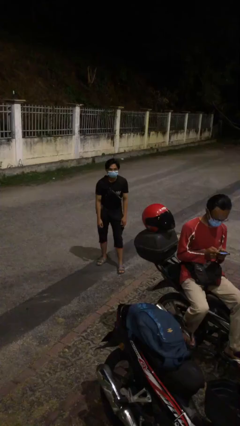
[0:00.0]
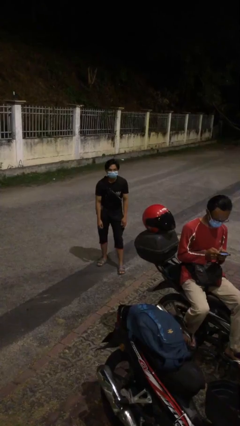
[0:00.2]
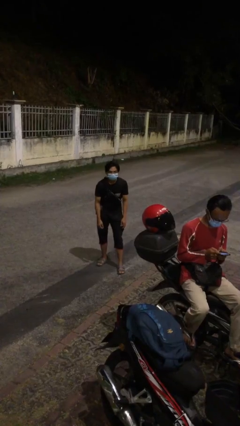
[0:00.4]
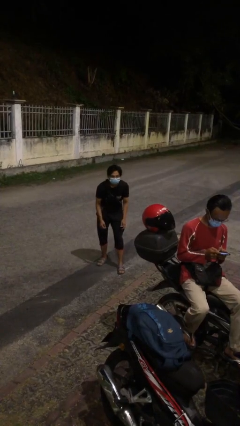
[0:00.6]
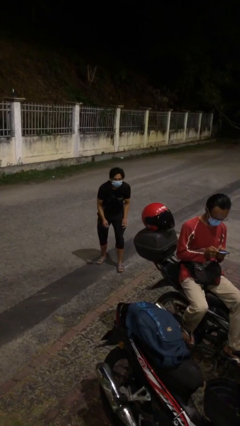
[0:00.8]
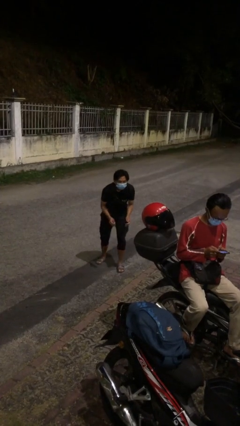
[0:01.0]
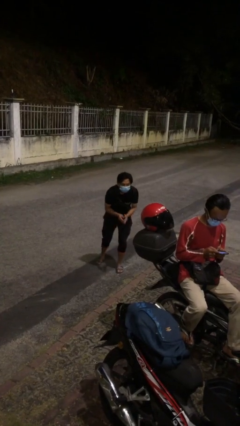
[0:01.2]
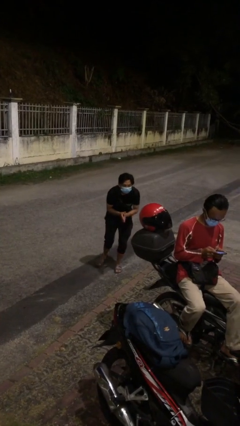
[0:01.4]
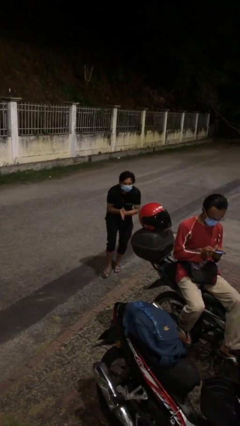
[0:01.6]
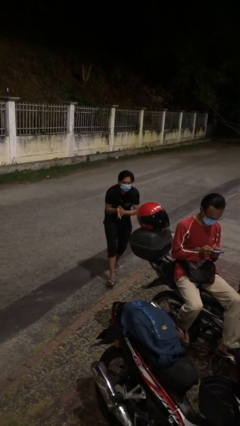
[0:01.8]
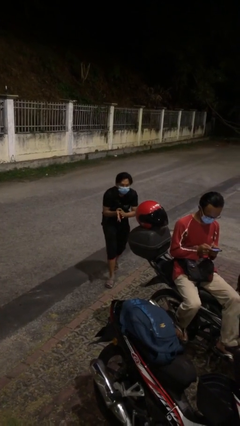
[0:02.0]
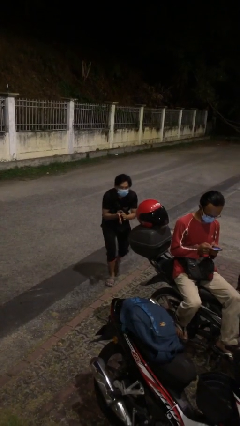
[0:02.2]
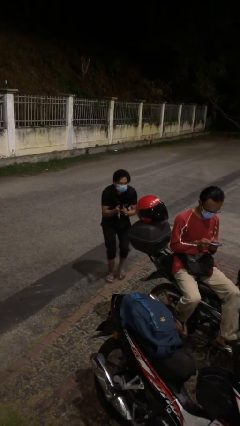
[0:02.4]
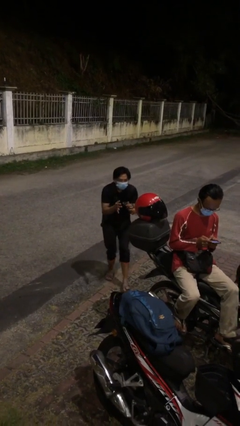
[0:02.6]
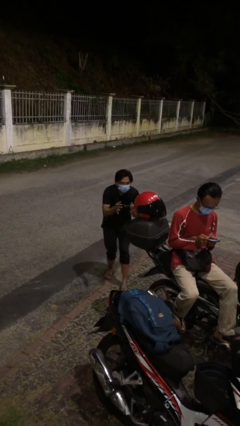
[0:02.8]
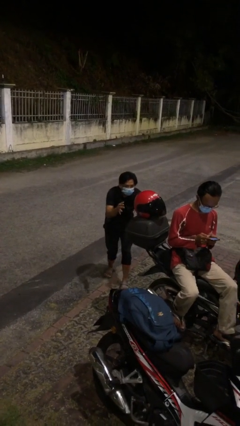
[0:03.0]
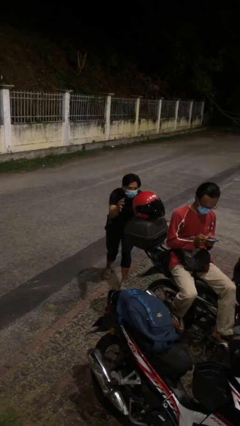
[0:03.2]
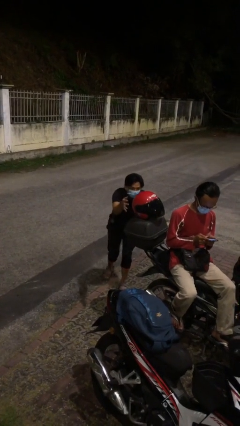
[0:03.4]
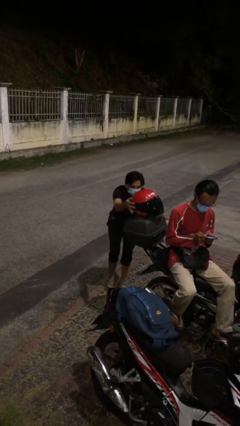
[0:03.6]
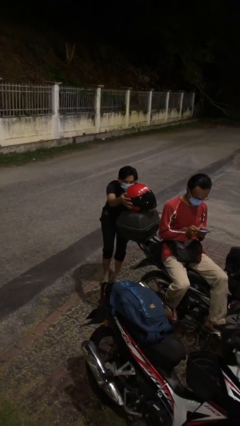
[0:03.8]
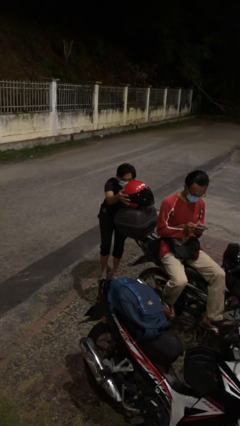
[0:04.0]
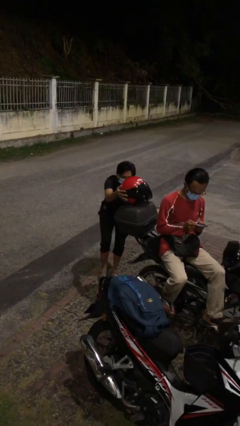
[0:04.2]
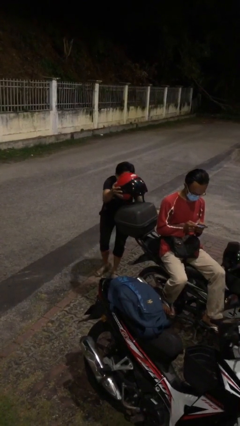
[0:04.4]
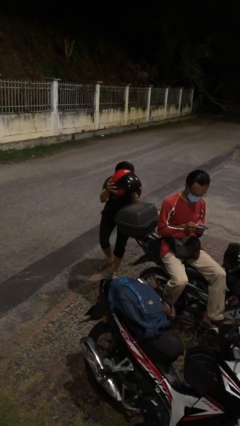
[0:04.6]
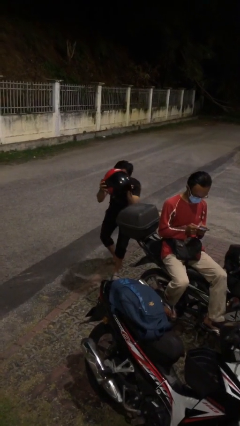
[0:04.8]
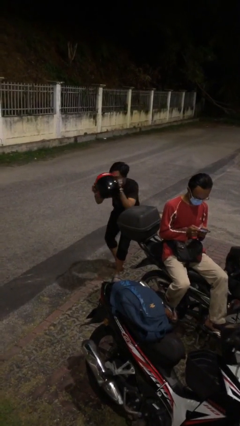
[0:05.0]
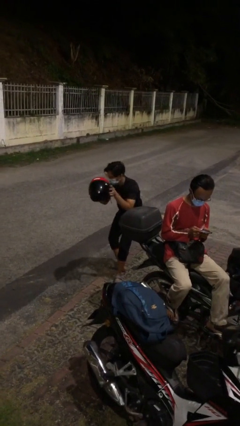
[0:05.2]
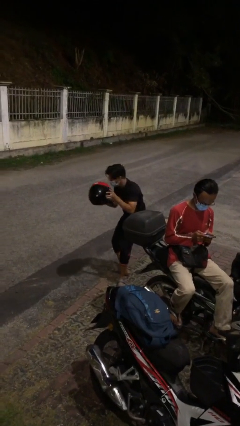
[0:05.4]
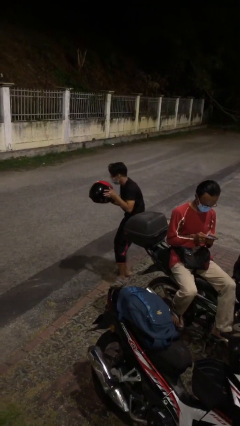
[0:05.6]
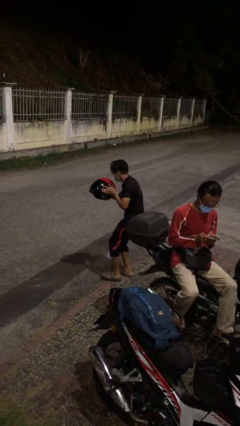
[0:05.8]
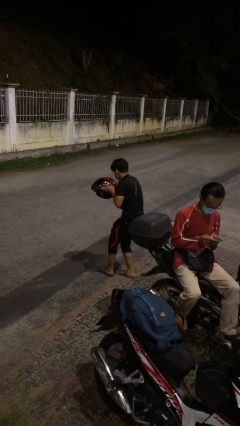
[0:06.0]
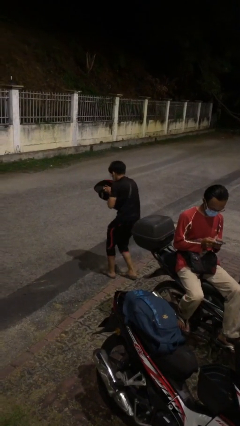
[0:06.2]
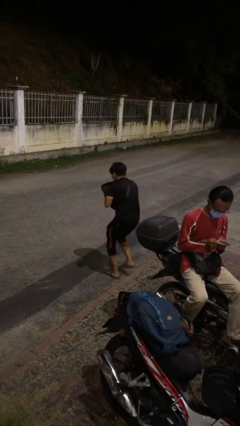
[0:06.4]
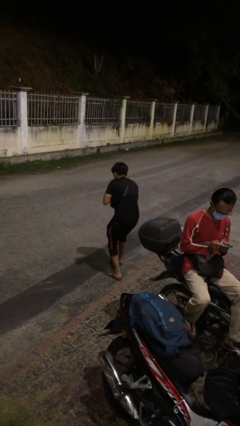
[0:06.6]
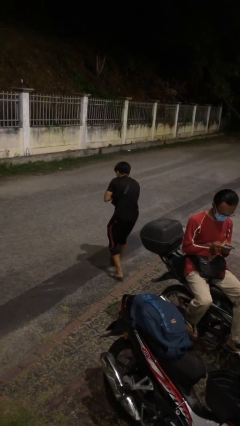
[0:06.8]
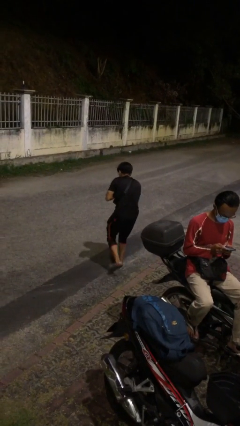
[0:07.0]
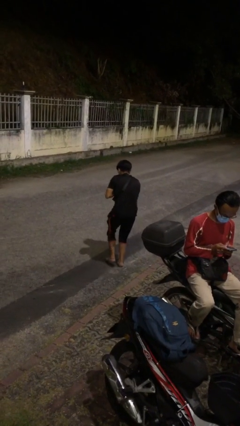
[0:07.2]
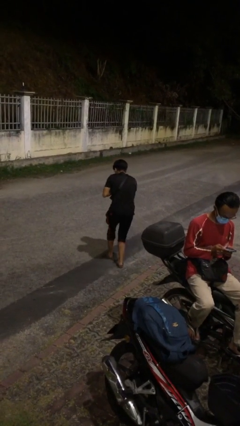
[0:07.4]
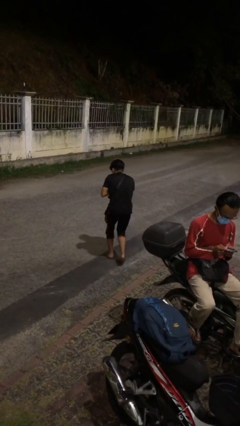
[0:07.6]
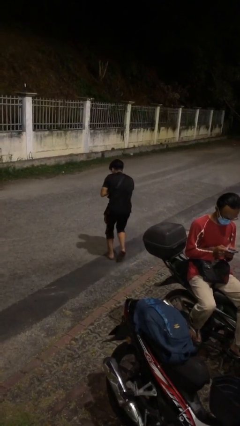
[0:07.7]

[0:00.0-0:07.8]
person steals object from person

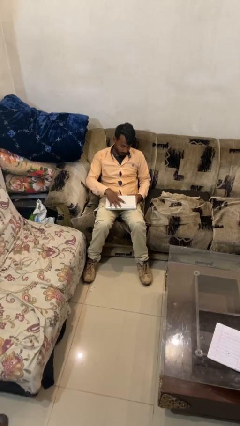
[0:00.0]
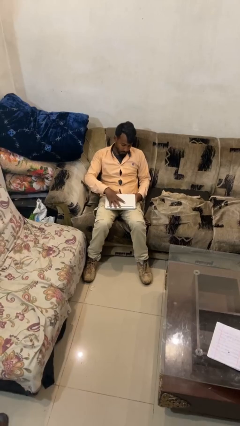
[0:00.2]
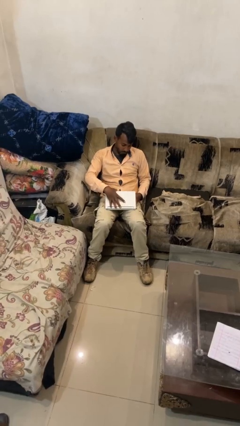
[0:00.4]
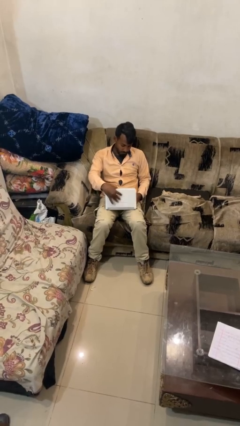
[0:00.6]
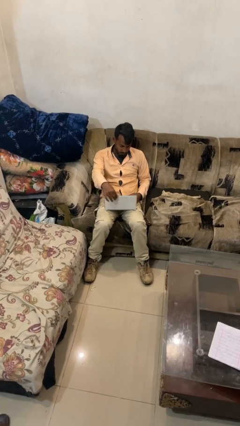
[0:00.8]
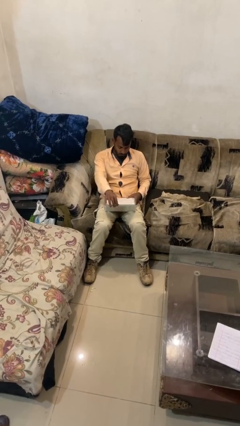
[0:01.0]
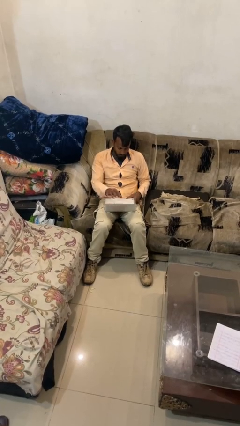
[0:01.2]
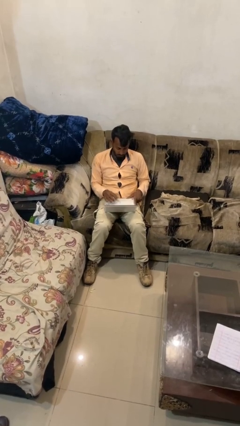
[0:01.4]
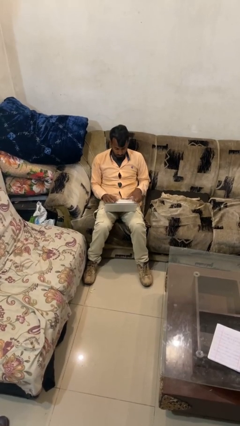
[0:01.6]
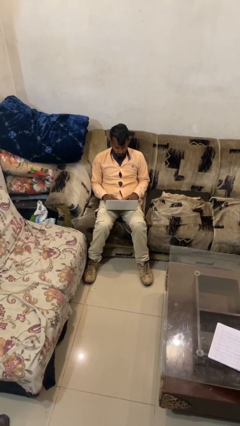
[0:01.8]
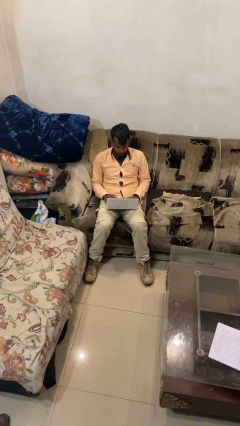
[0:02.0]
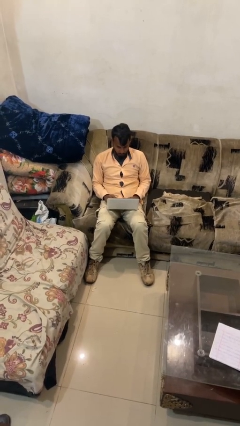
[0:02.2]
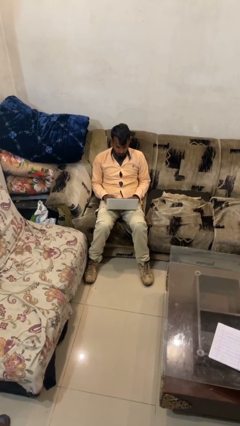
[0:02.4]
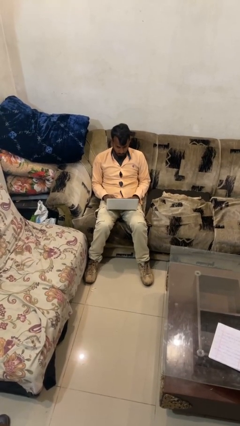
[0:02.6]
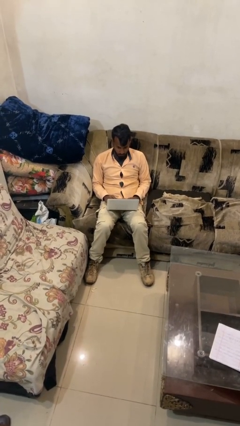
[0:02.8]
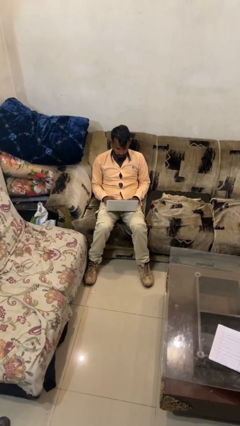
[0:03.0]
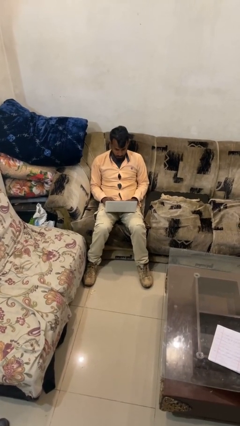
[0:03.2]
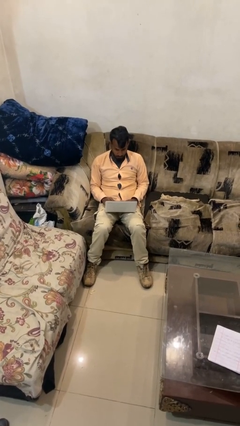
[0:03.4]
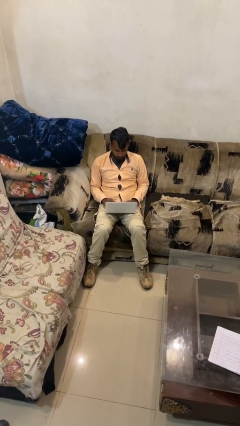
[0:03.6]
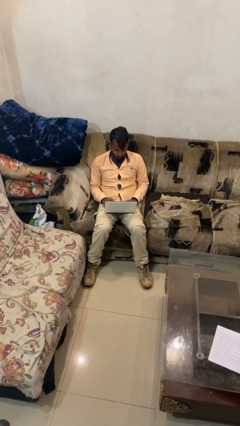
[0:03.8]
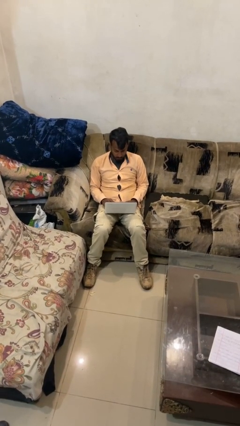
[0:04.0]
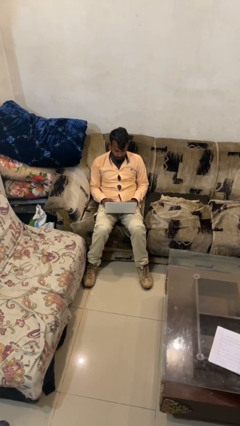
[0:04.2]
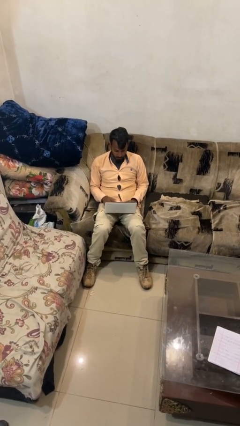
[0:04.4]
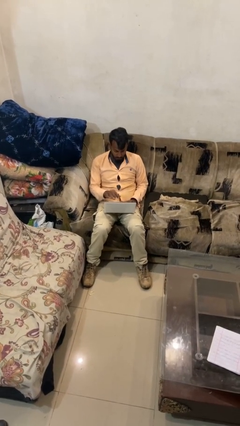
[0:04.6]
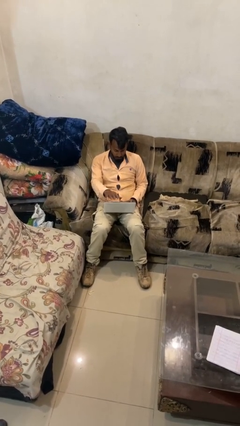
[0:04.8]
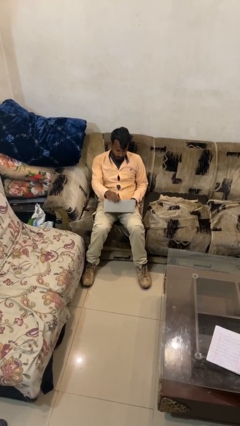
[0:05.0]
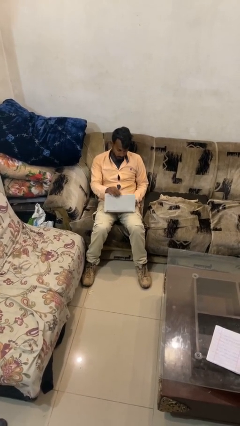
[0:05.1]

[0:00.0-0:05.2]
person interacts with laptop

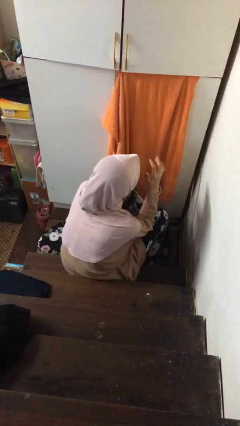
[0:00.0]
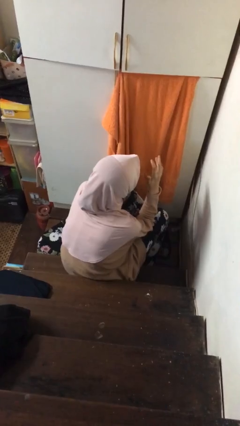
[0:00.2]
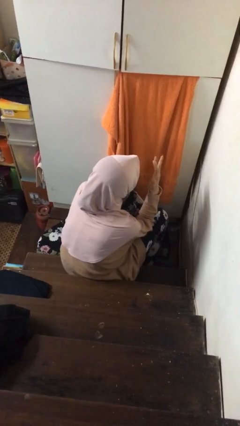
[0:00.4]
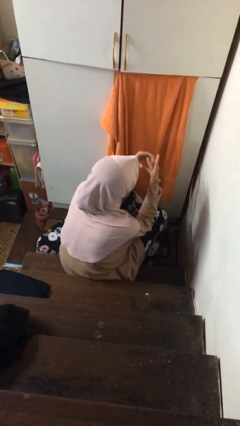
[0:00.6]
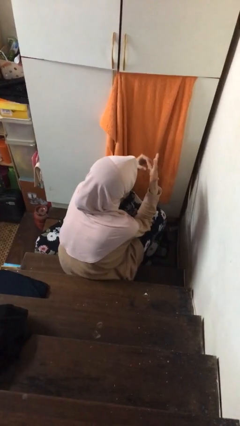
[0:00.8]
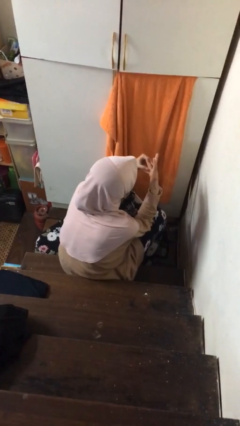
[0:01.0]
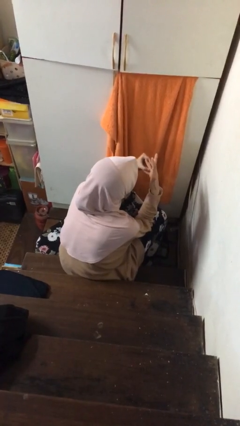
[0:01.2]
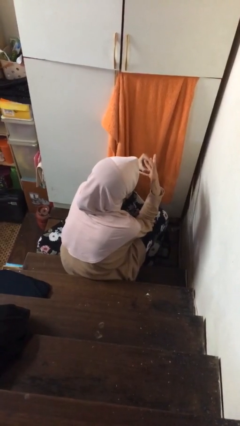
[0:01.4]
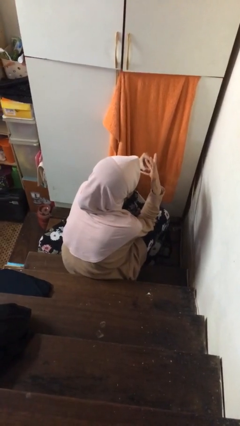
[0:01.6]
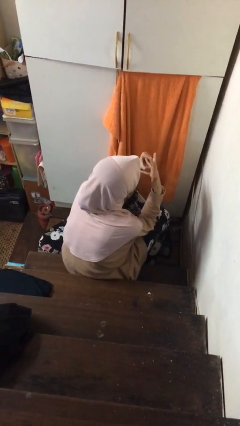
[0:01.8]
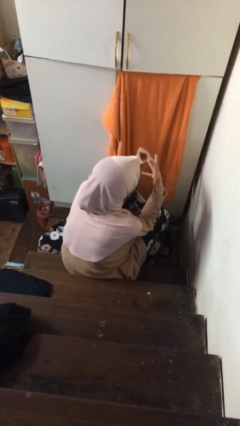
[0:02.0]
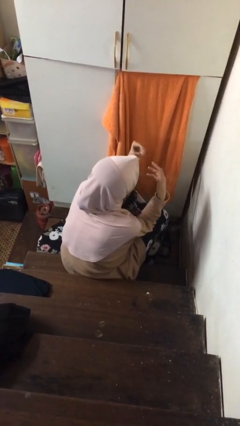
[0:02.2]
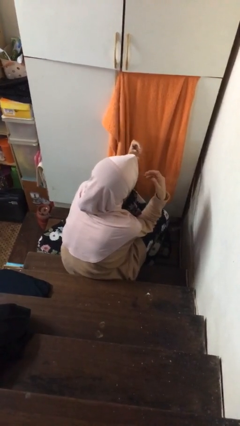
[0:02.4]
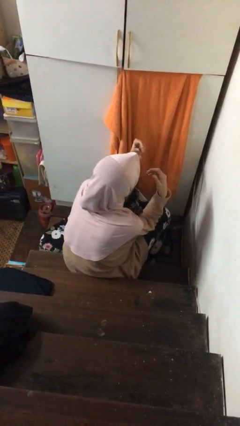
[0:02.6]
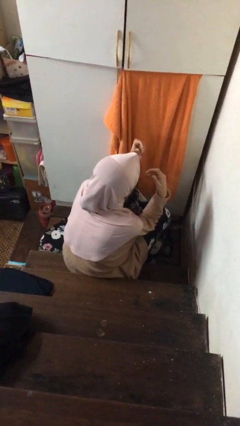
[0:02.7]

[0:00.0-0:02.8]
person takes off ring

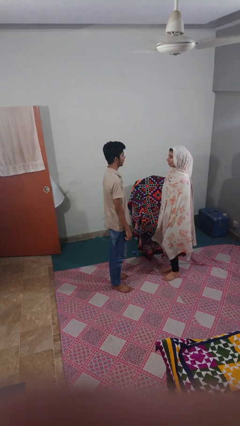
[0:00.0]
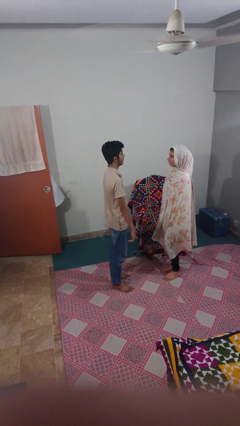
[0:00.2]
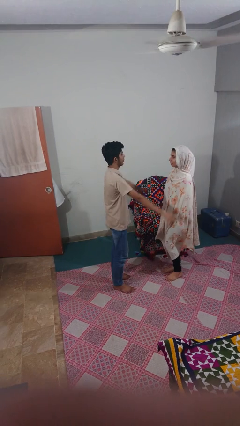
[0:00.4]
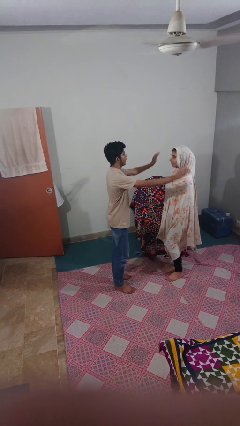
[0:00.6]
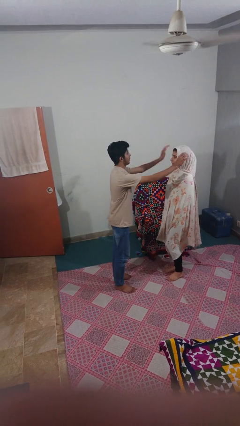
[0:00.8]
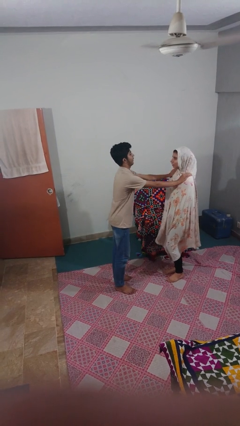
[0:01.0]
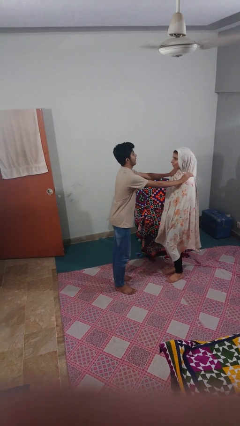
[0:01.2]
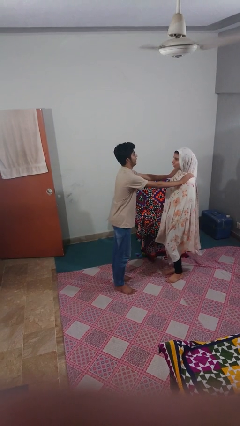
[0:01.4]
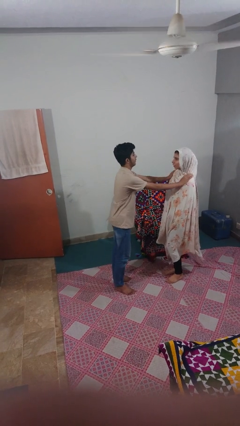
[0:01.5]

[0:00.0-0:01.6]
person pounds shoulders of person

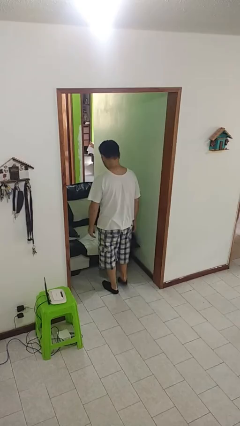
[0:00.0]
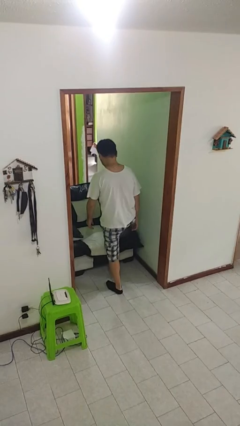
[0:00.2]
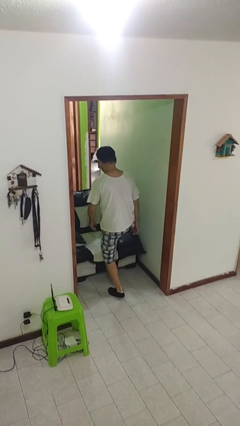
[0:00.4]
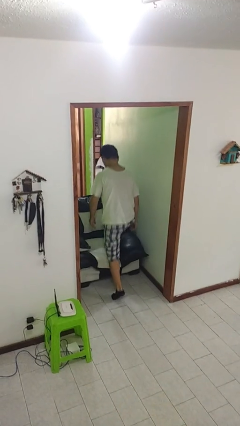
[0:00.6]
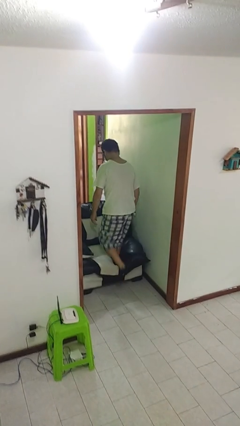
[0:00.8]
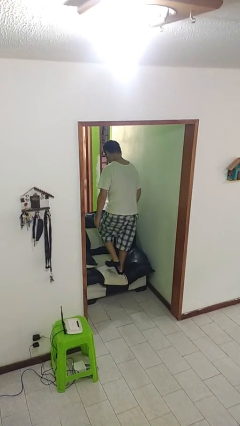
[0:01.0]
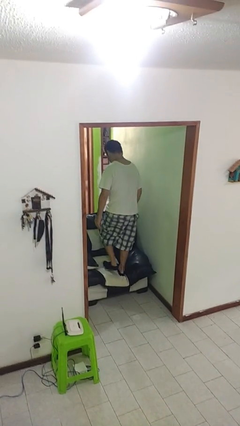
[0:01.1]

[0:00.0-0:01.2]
person climbs on couch
